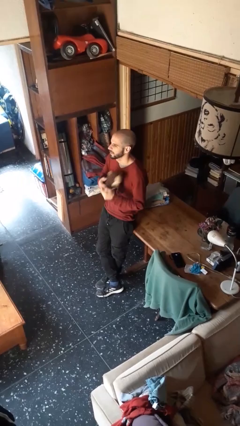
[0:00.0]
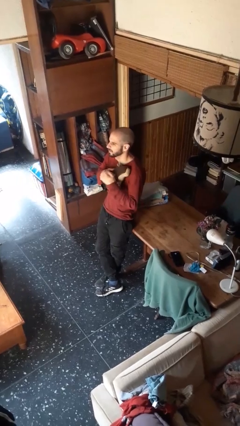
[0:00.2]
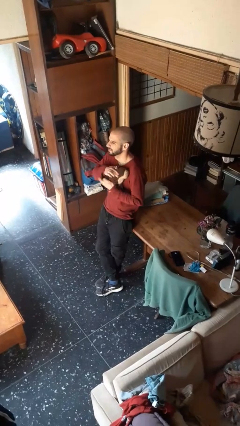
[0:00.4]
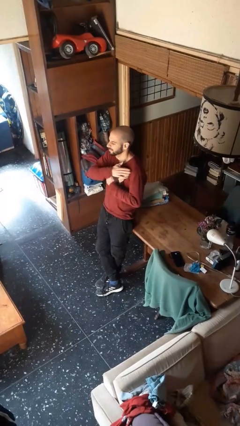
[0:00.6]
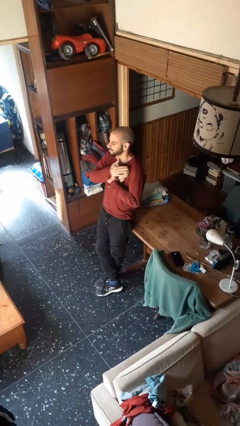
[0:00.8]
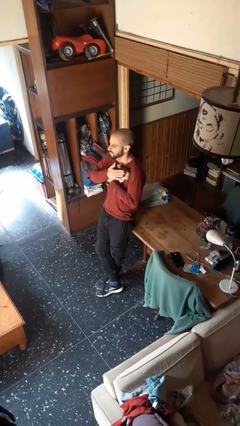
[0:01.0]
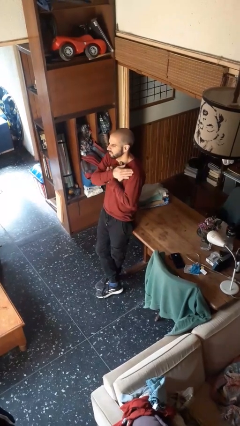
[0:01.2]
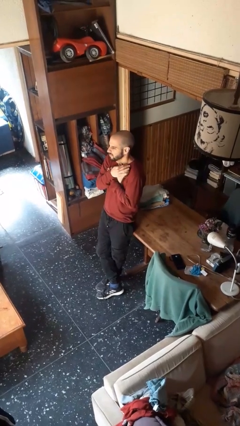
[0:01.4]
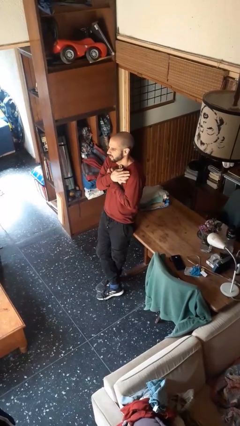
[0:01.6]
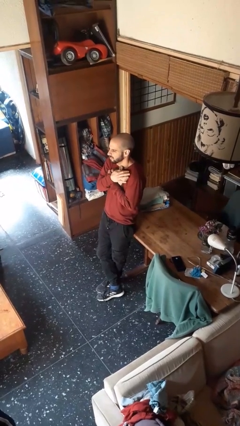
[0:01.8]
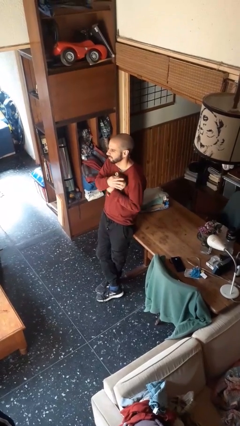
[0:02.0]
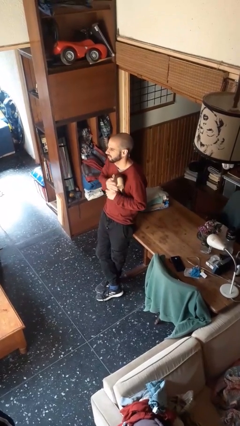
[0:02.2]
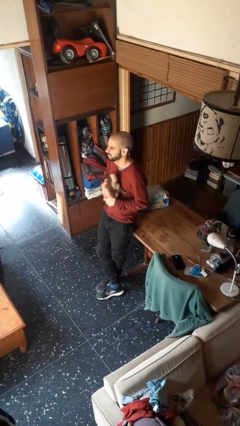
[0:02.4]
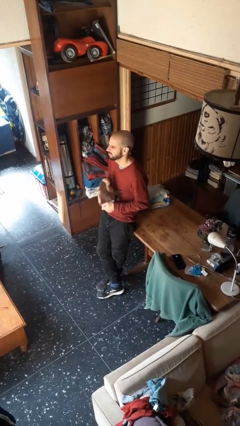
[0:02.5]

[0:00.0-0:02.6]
person hugs stuffed animal

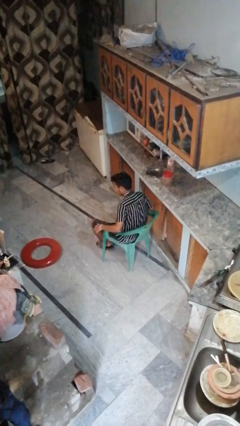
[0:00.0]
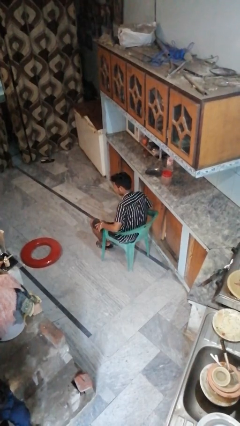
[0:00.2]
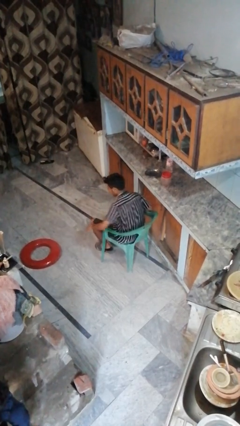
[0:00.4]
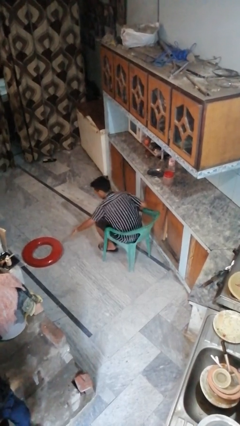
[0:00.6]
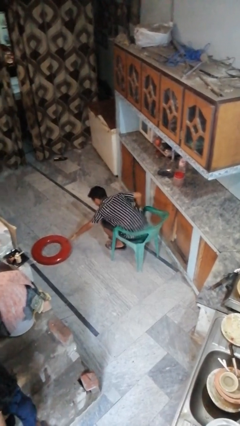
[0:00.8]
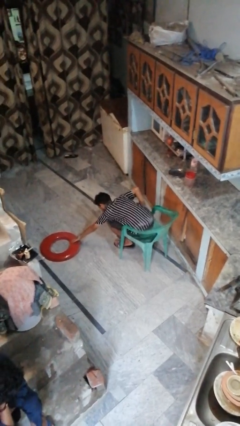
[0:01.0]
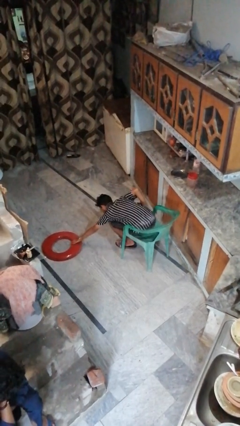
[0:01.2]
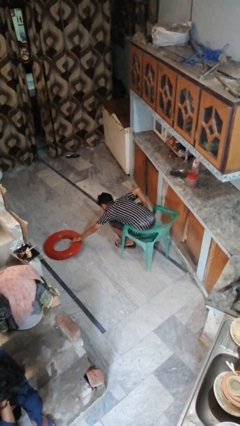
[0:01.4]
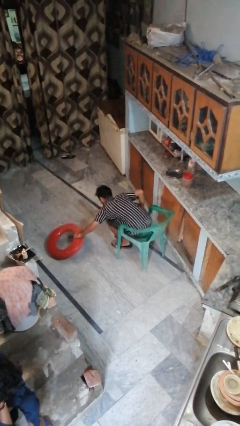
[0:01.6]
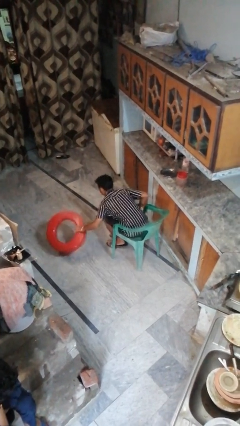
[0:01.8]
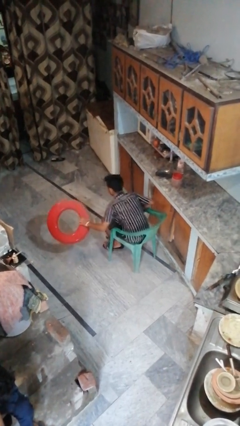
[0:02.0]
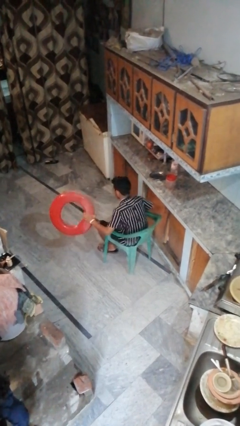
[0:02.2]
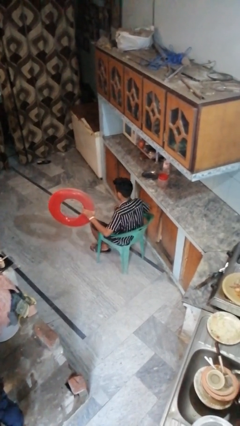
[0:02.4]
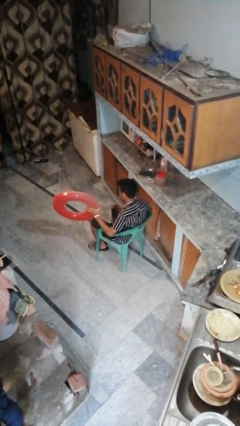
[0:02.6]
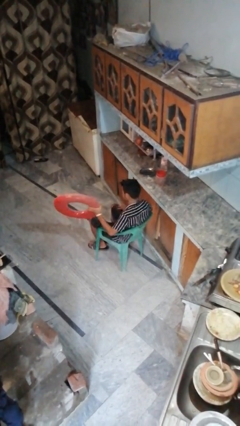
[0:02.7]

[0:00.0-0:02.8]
person picks up object from floor

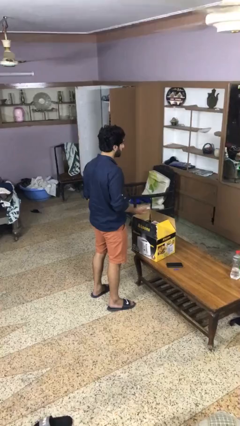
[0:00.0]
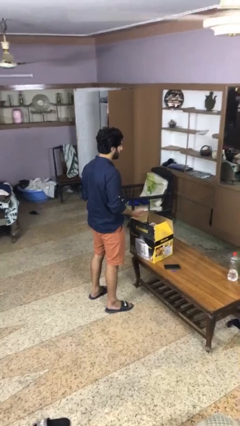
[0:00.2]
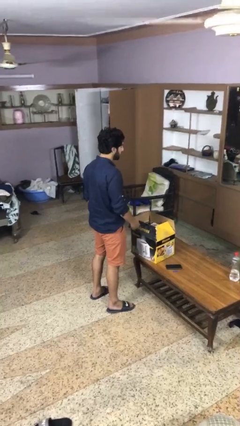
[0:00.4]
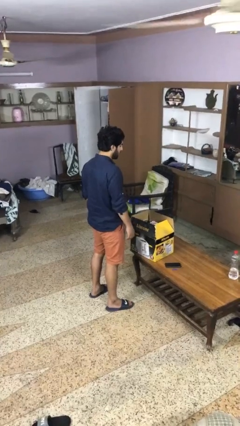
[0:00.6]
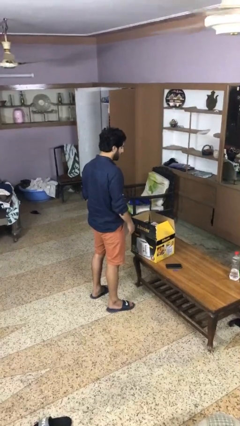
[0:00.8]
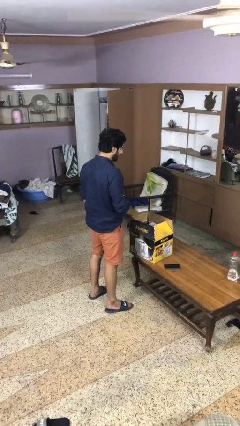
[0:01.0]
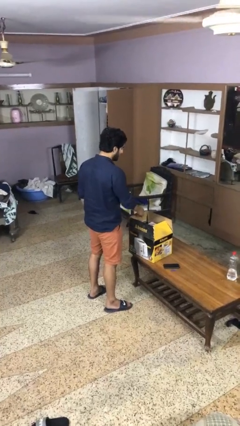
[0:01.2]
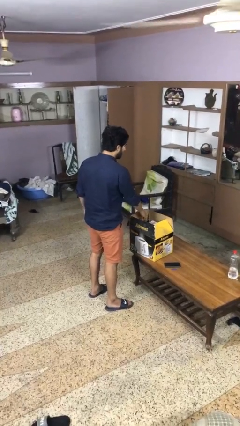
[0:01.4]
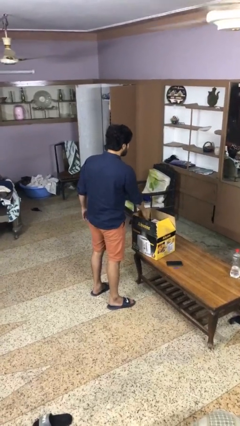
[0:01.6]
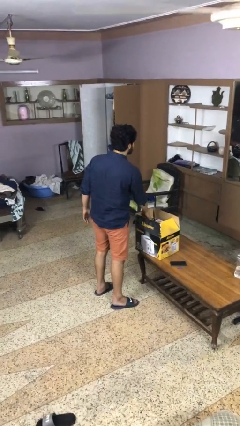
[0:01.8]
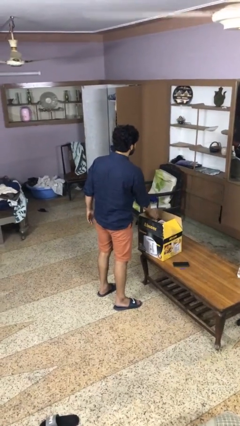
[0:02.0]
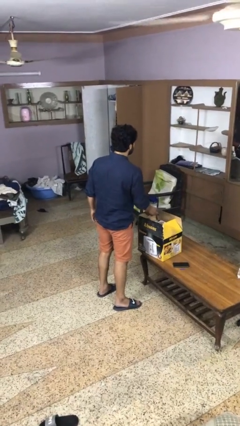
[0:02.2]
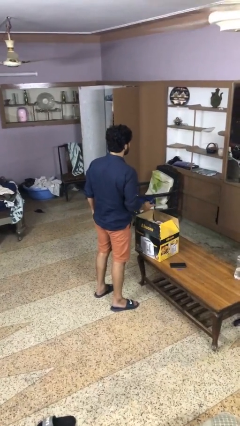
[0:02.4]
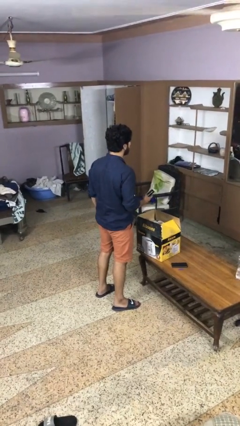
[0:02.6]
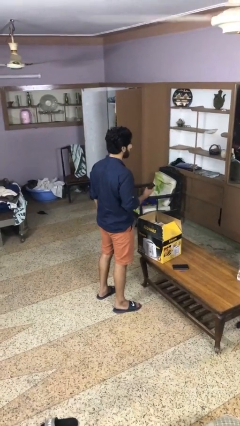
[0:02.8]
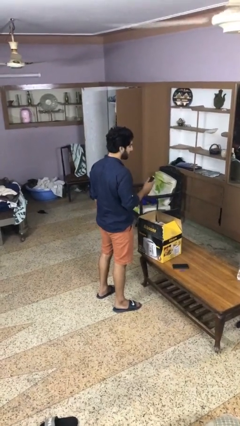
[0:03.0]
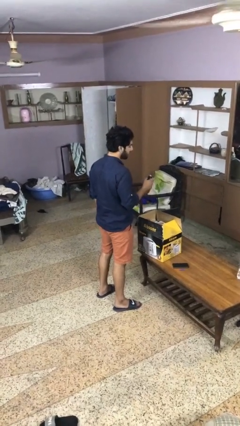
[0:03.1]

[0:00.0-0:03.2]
person takes object from box

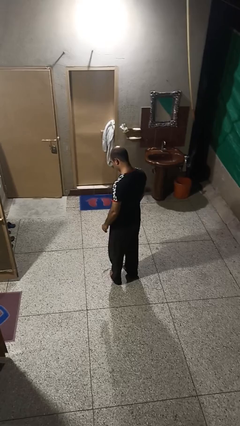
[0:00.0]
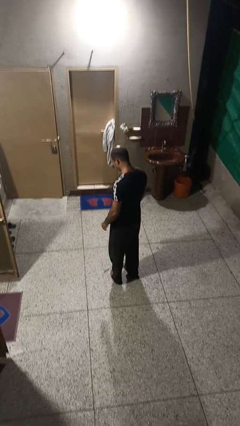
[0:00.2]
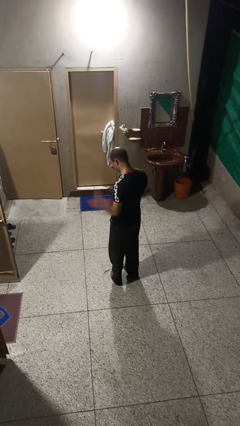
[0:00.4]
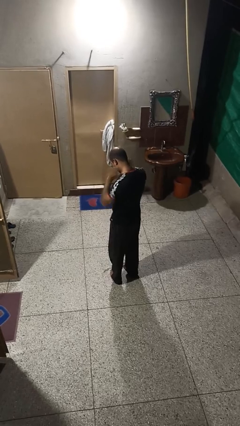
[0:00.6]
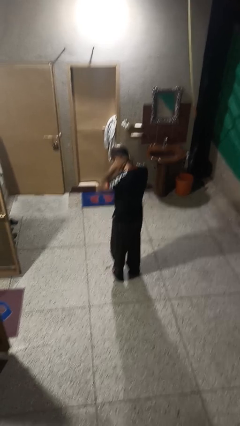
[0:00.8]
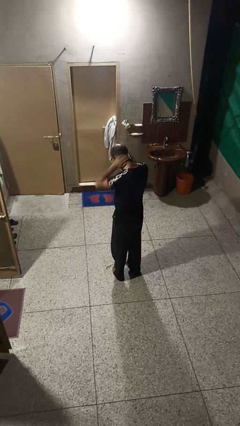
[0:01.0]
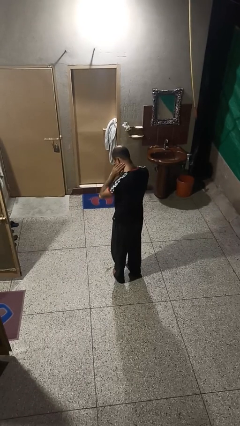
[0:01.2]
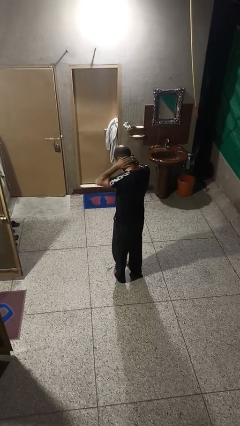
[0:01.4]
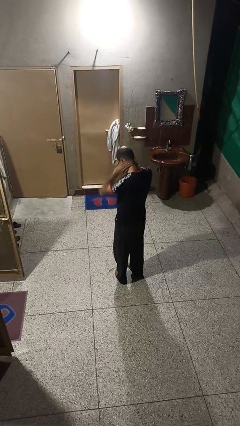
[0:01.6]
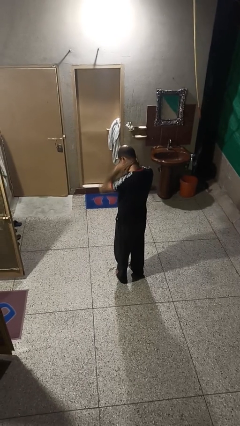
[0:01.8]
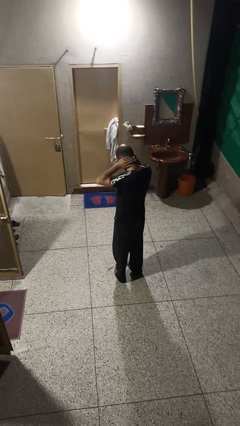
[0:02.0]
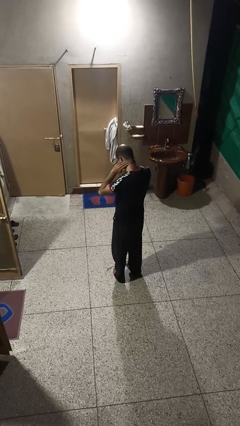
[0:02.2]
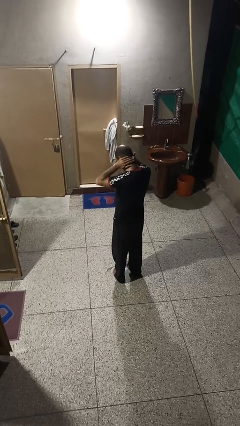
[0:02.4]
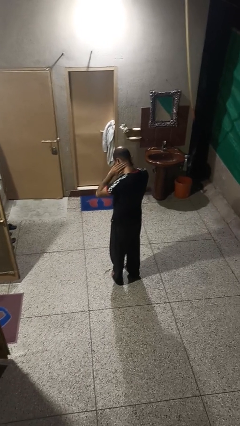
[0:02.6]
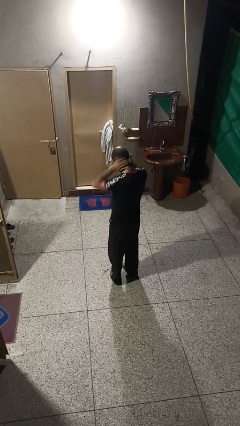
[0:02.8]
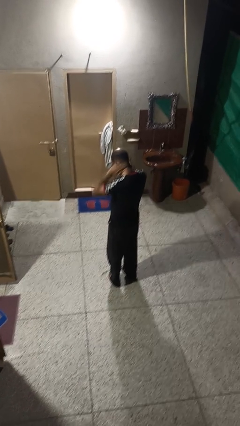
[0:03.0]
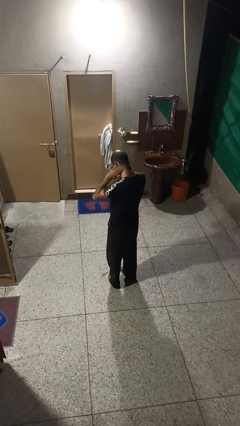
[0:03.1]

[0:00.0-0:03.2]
person rubs neck

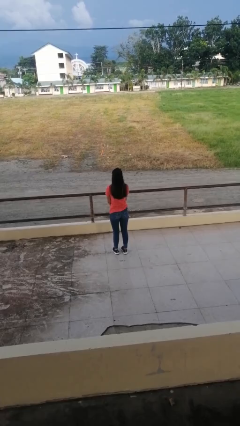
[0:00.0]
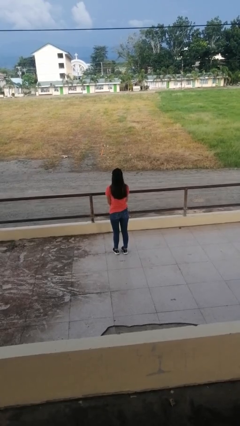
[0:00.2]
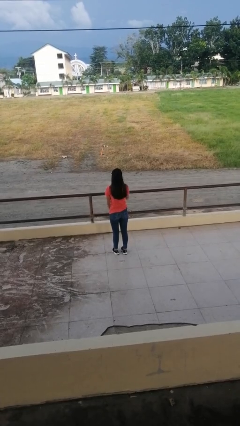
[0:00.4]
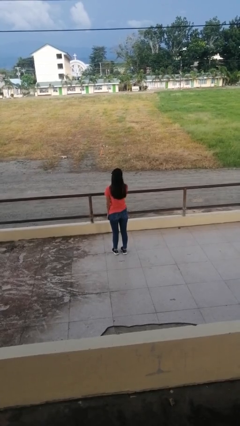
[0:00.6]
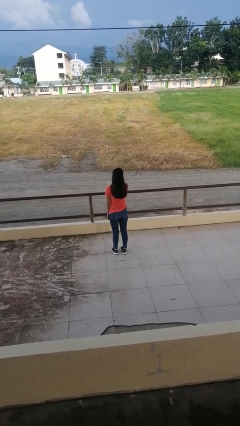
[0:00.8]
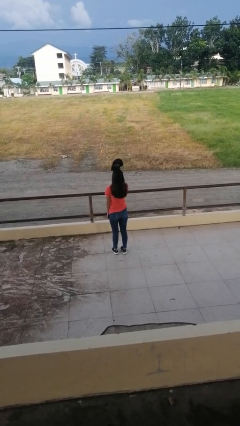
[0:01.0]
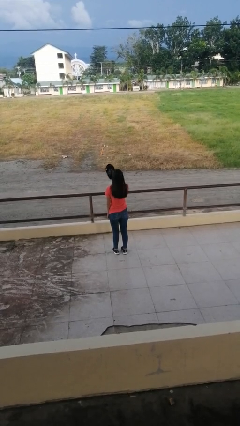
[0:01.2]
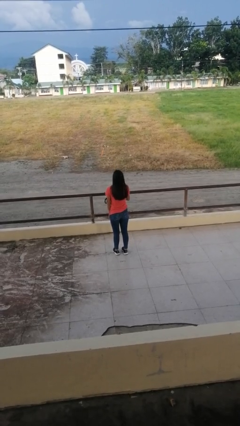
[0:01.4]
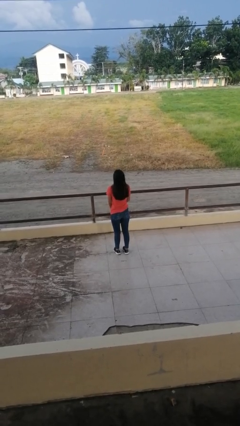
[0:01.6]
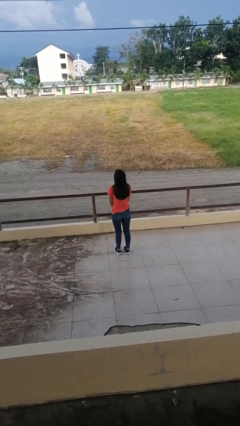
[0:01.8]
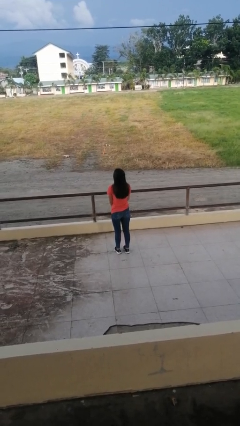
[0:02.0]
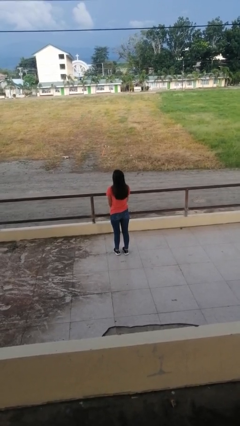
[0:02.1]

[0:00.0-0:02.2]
person takes off hat

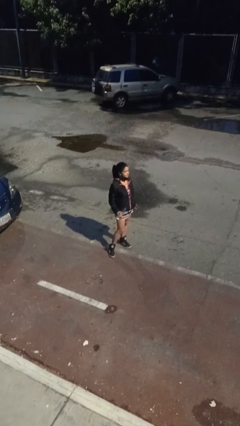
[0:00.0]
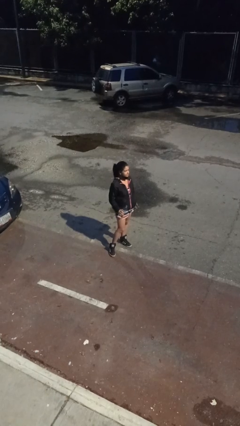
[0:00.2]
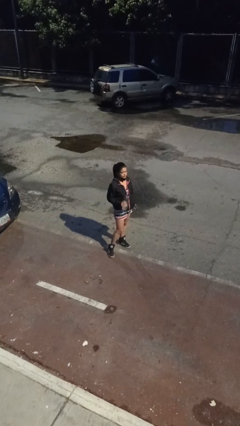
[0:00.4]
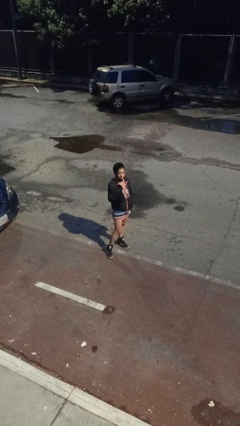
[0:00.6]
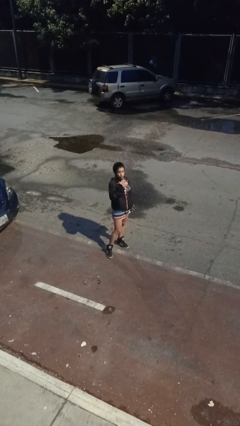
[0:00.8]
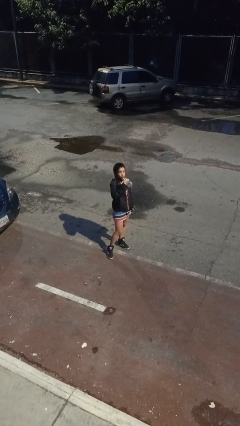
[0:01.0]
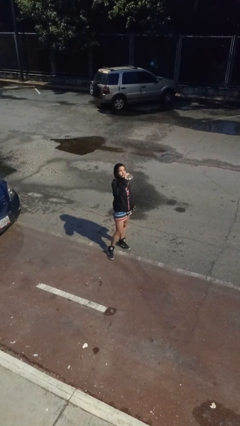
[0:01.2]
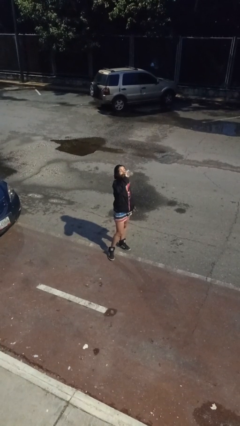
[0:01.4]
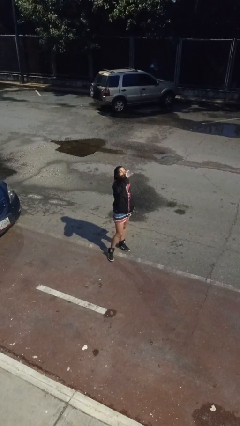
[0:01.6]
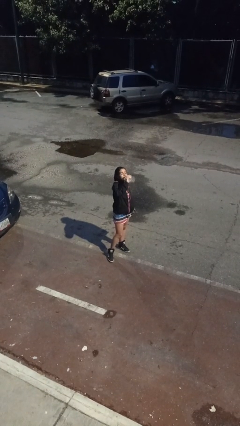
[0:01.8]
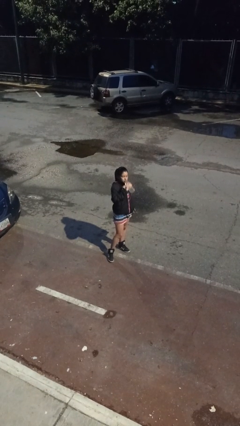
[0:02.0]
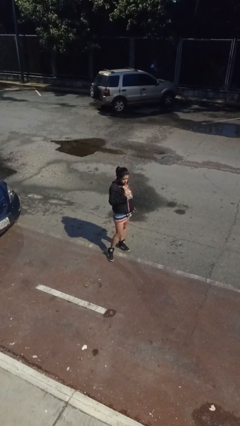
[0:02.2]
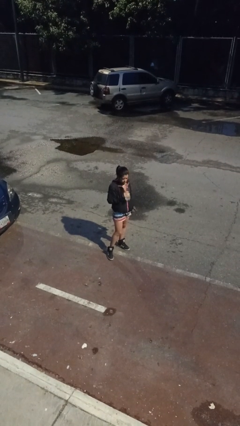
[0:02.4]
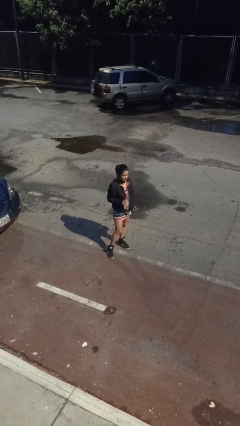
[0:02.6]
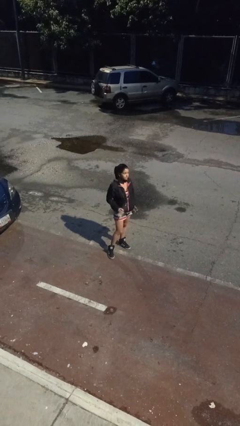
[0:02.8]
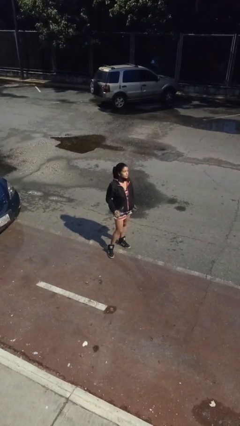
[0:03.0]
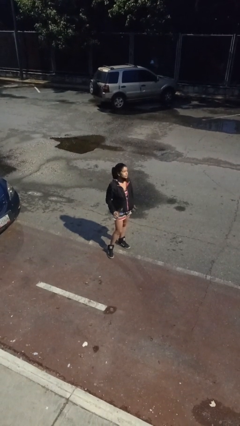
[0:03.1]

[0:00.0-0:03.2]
person drinks from bottle

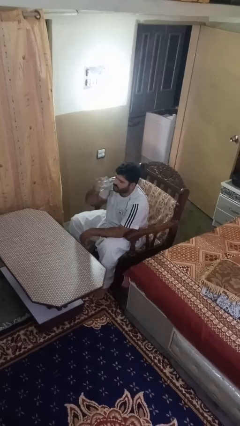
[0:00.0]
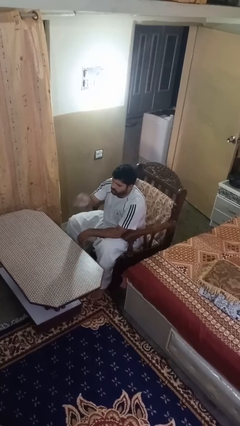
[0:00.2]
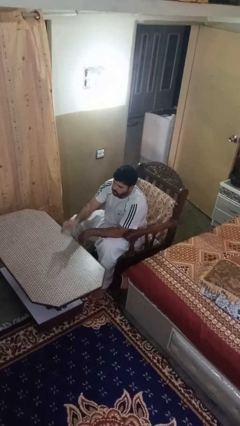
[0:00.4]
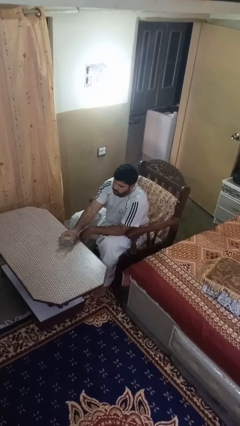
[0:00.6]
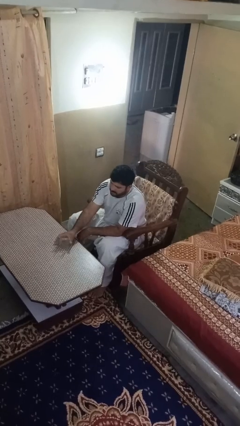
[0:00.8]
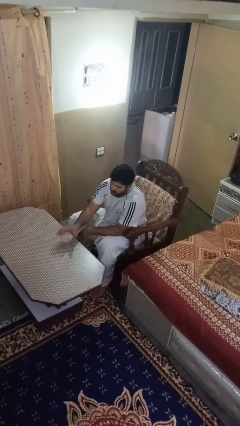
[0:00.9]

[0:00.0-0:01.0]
person puts down object on table
